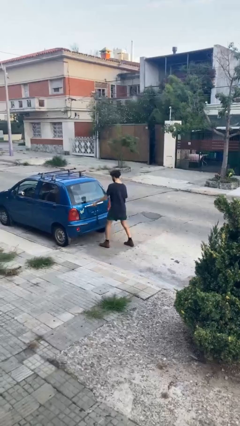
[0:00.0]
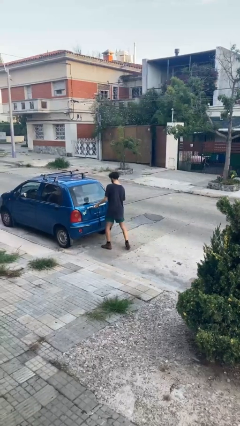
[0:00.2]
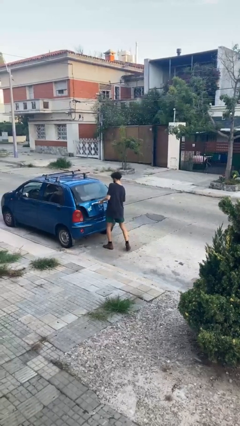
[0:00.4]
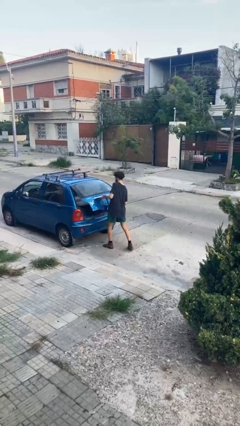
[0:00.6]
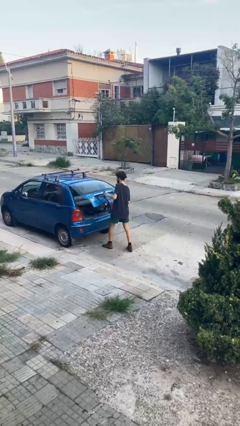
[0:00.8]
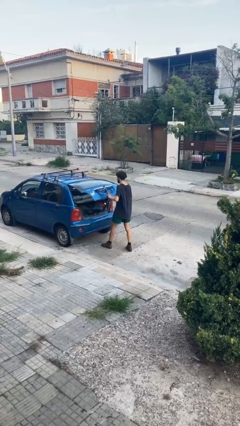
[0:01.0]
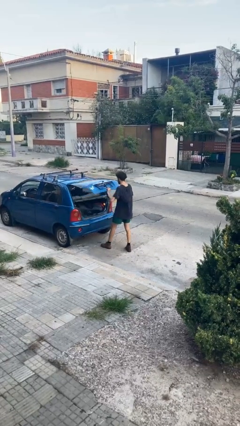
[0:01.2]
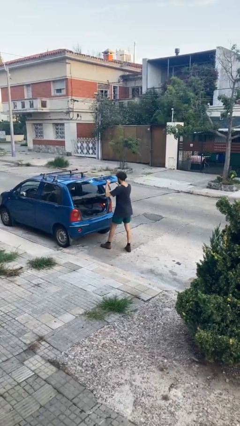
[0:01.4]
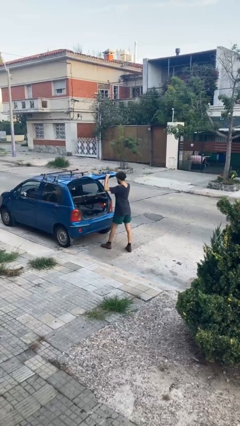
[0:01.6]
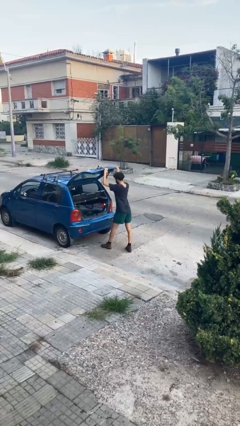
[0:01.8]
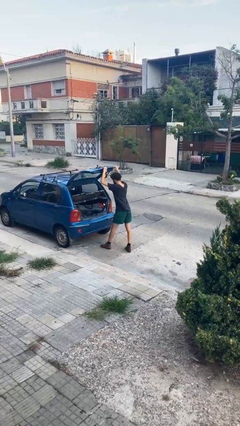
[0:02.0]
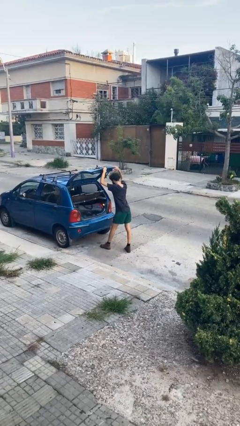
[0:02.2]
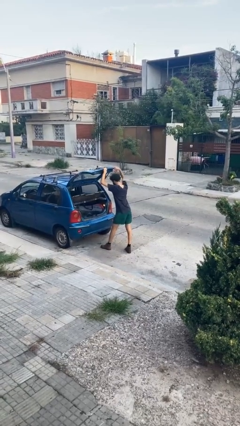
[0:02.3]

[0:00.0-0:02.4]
person opens car trunk

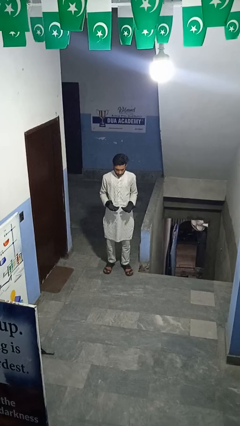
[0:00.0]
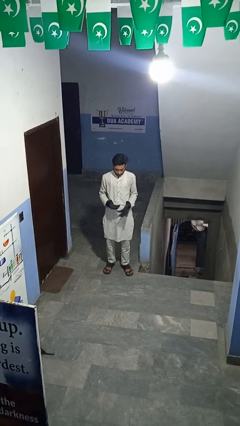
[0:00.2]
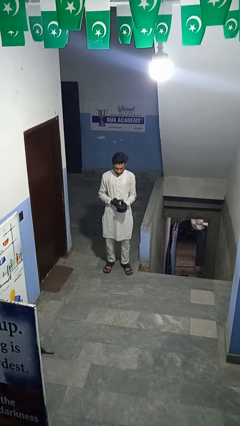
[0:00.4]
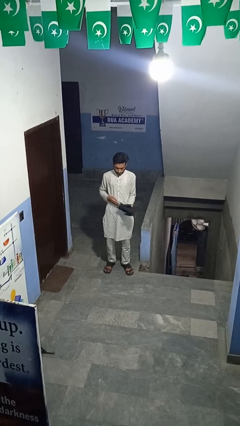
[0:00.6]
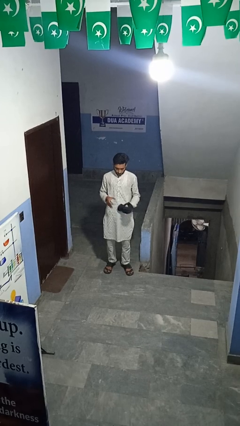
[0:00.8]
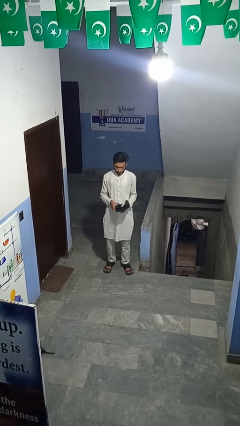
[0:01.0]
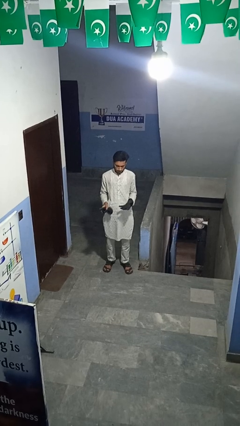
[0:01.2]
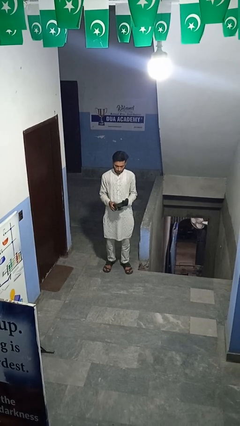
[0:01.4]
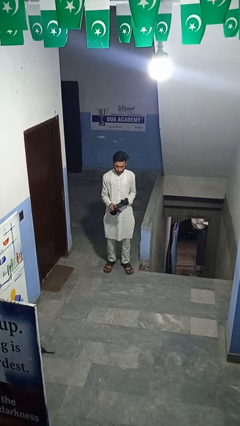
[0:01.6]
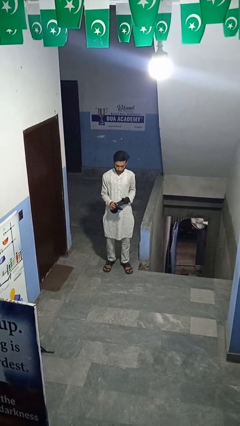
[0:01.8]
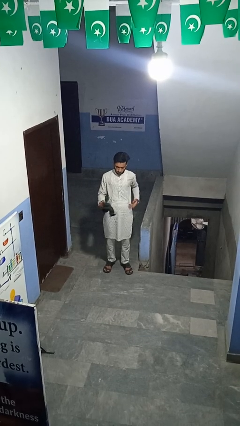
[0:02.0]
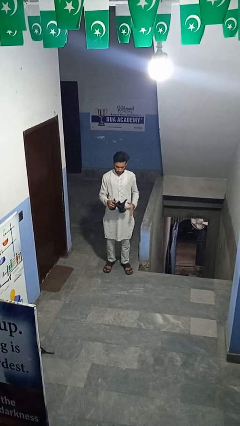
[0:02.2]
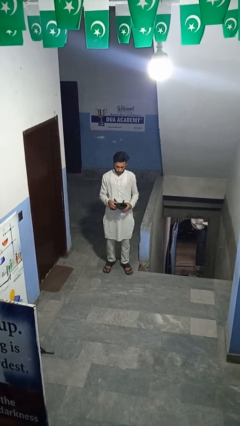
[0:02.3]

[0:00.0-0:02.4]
person takes off gloves

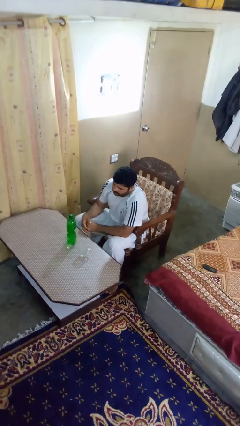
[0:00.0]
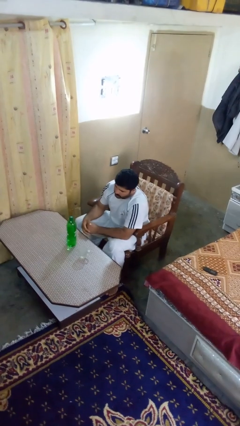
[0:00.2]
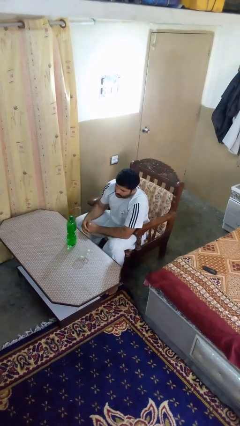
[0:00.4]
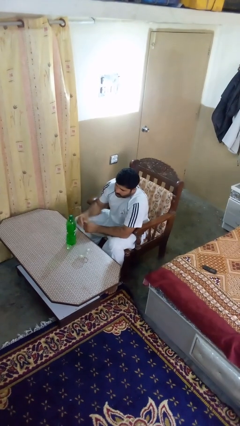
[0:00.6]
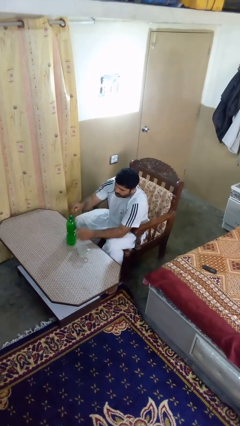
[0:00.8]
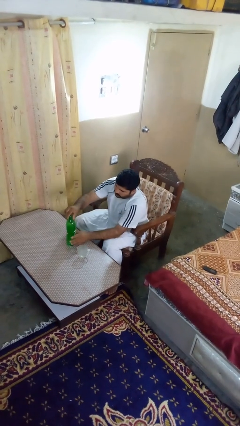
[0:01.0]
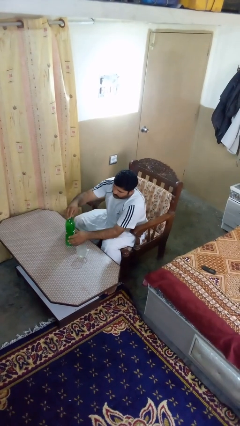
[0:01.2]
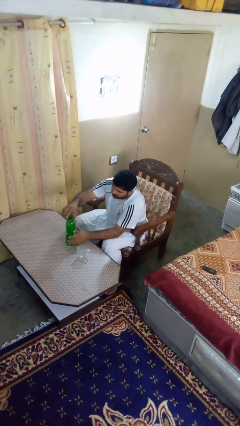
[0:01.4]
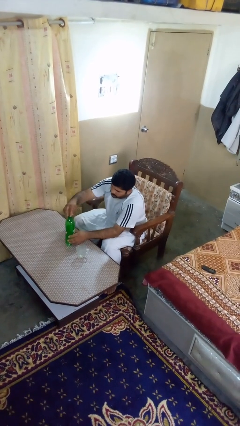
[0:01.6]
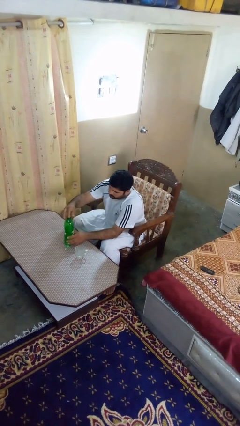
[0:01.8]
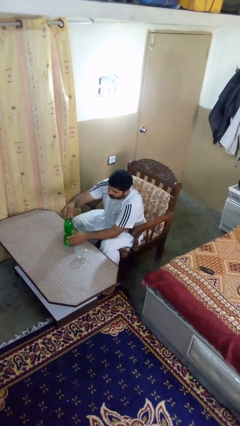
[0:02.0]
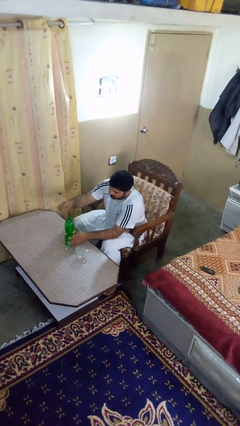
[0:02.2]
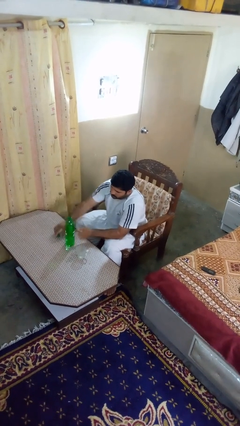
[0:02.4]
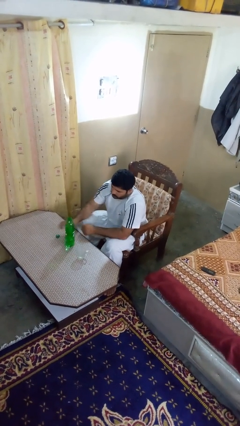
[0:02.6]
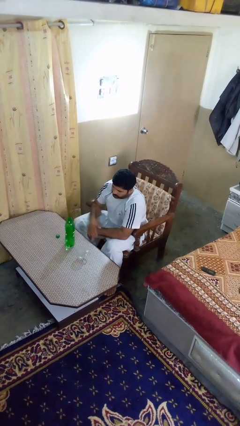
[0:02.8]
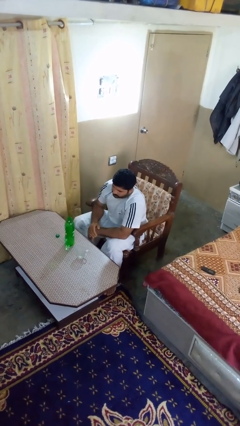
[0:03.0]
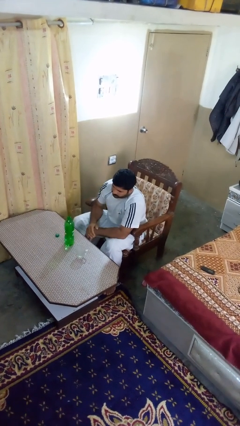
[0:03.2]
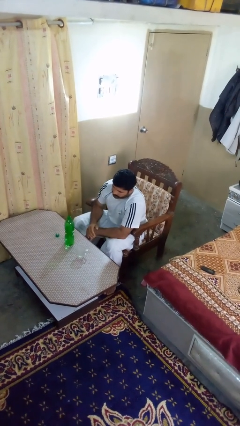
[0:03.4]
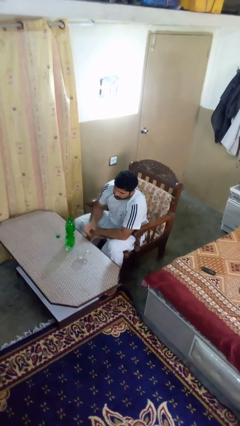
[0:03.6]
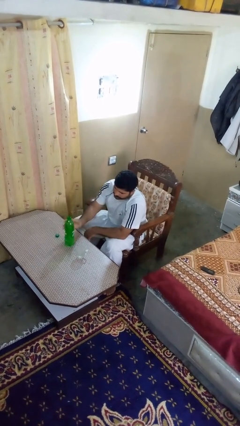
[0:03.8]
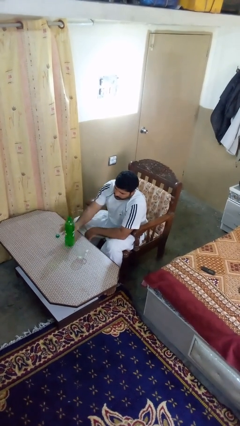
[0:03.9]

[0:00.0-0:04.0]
person unscrews lid from bottle

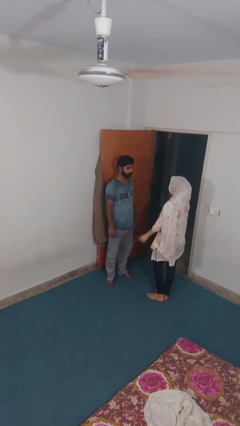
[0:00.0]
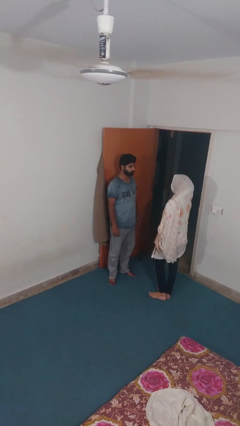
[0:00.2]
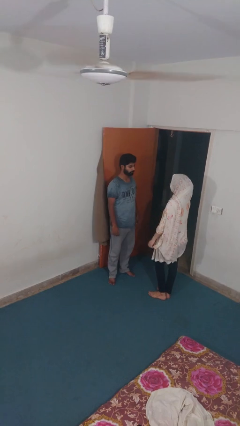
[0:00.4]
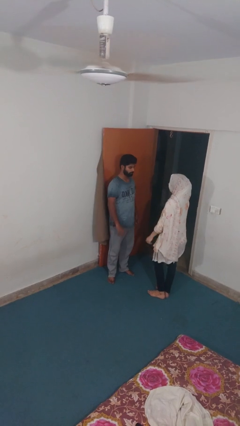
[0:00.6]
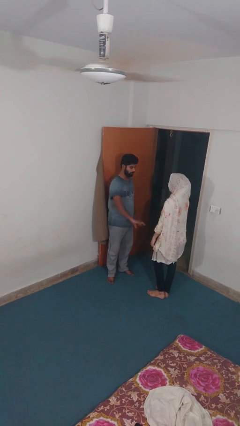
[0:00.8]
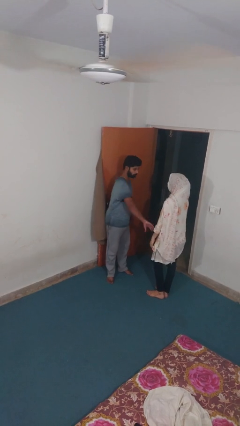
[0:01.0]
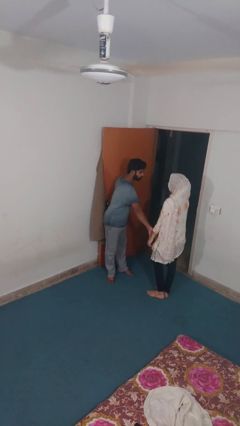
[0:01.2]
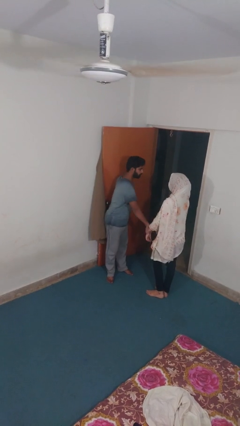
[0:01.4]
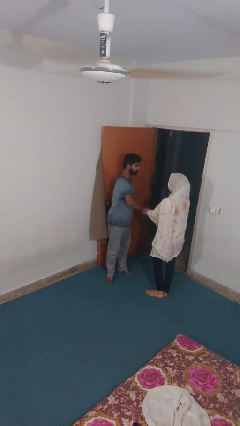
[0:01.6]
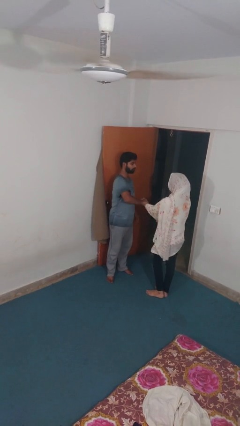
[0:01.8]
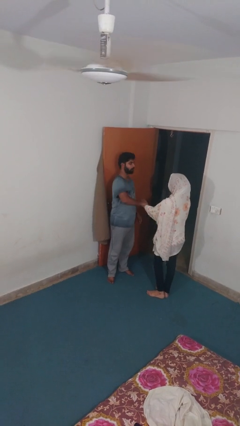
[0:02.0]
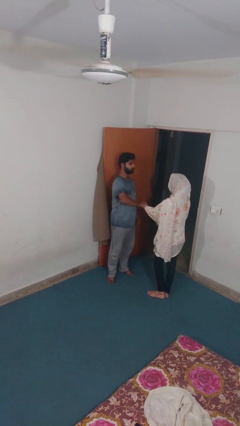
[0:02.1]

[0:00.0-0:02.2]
person grabs person by forearm

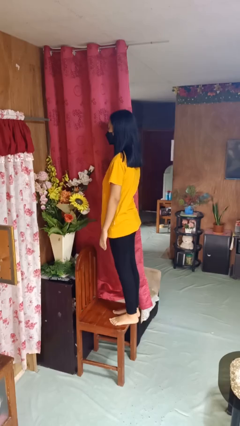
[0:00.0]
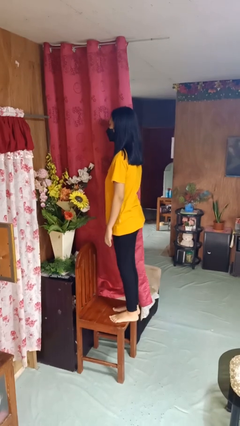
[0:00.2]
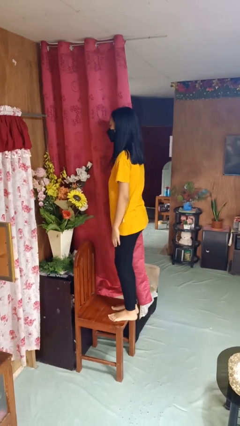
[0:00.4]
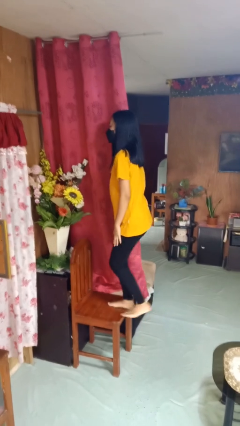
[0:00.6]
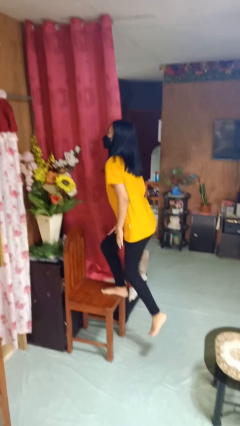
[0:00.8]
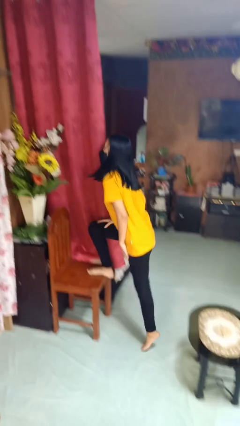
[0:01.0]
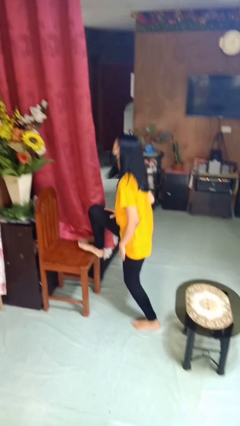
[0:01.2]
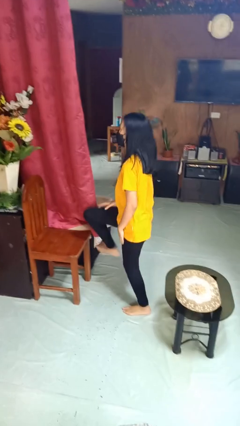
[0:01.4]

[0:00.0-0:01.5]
person climbs off chair

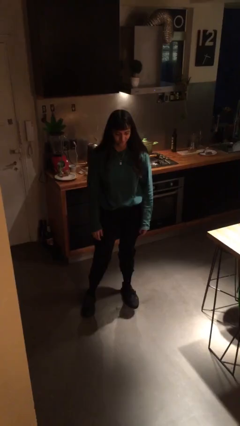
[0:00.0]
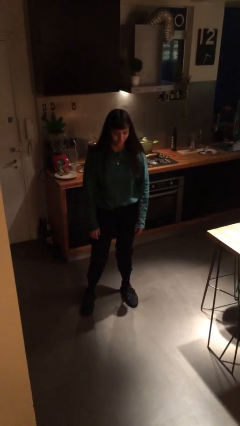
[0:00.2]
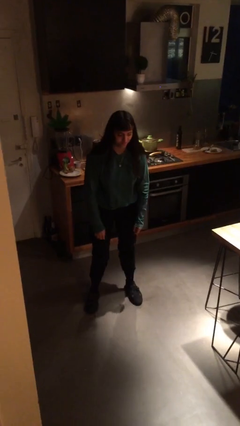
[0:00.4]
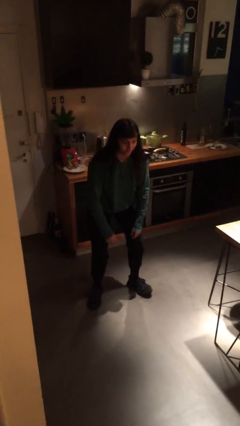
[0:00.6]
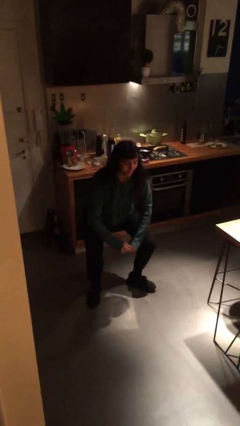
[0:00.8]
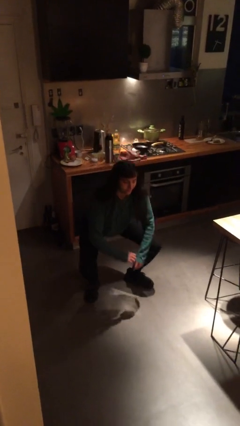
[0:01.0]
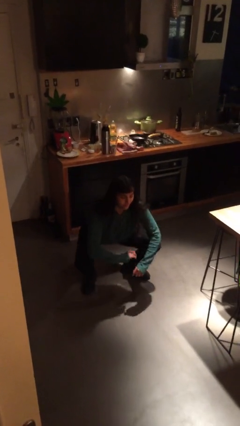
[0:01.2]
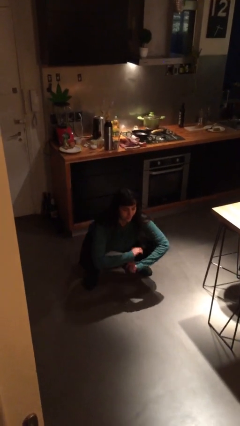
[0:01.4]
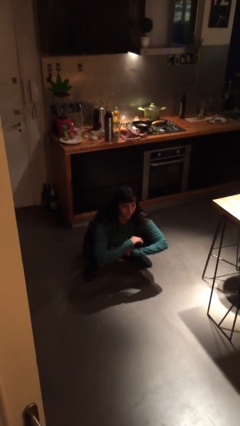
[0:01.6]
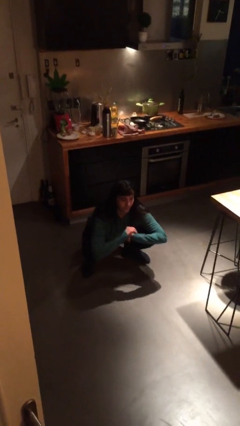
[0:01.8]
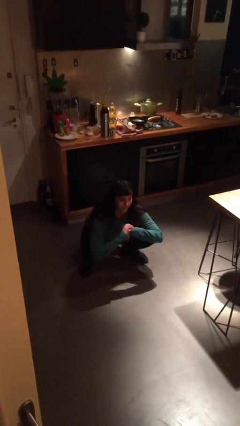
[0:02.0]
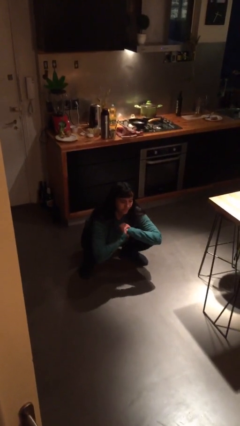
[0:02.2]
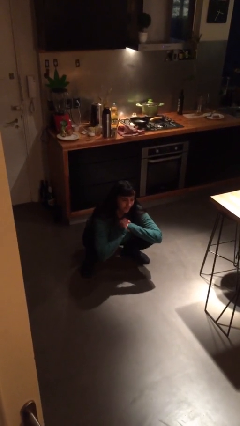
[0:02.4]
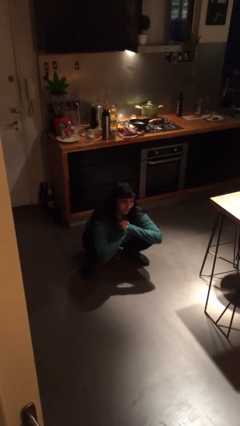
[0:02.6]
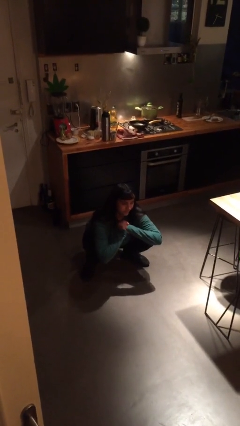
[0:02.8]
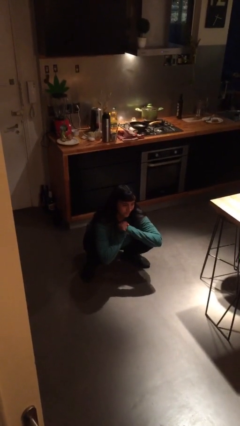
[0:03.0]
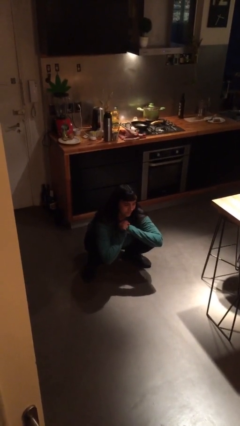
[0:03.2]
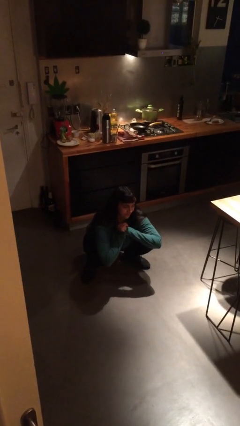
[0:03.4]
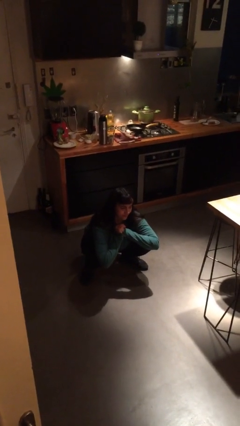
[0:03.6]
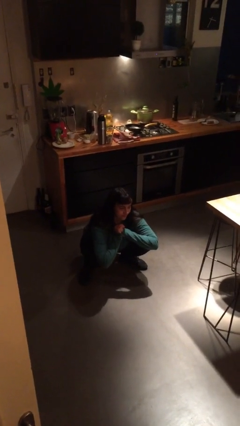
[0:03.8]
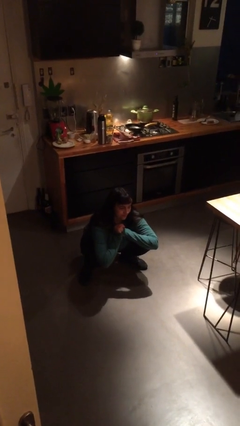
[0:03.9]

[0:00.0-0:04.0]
person squats

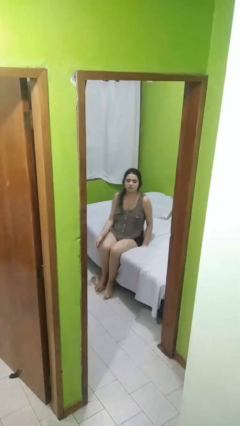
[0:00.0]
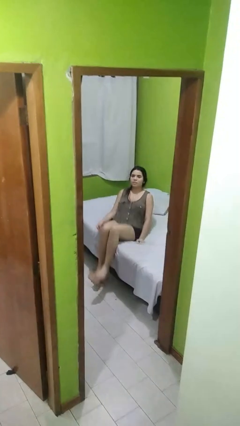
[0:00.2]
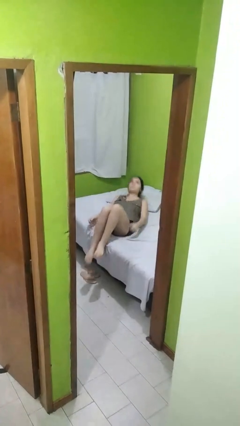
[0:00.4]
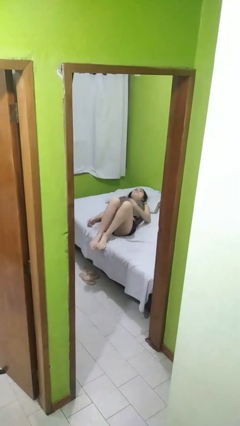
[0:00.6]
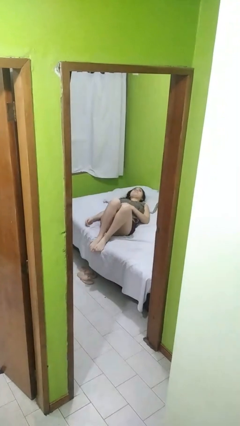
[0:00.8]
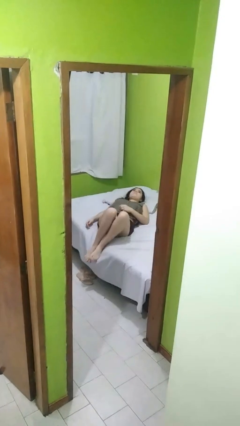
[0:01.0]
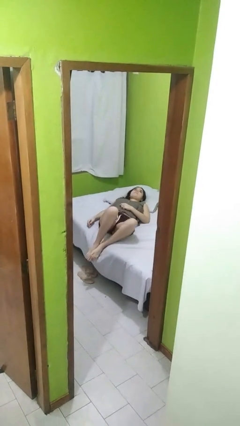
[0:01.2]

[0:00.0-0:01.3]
person lies down on bed
